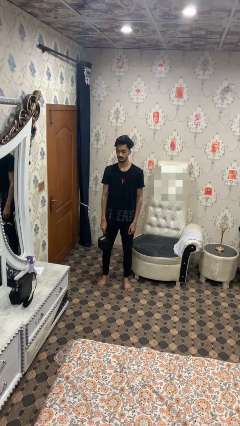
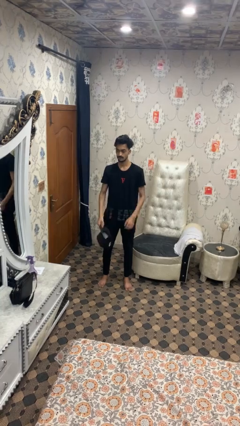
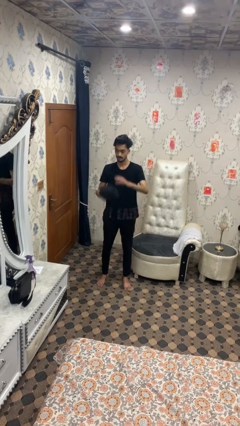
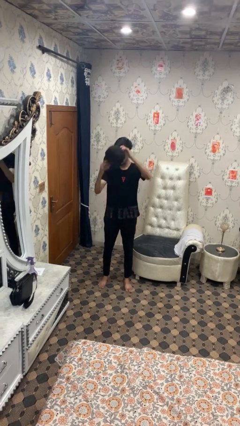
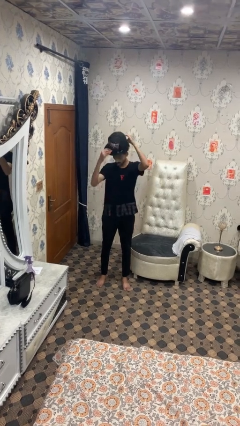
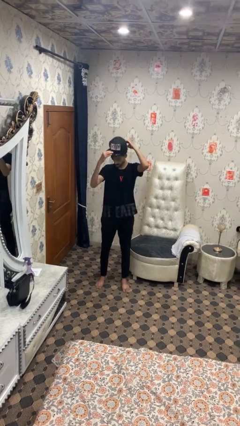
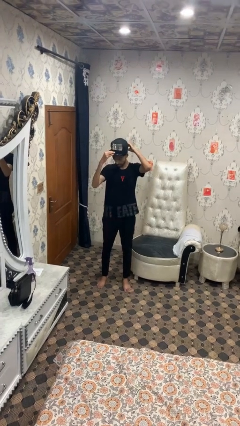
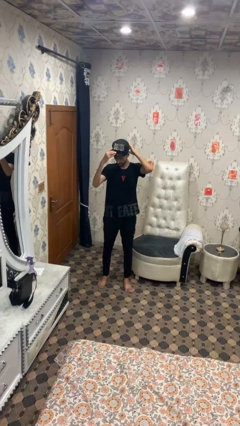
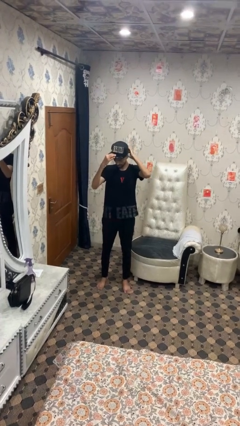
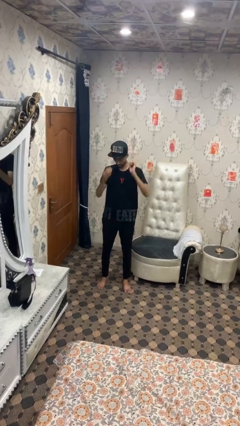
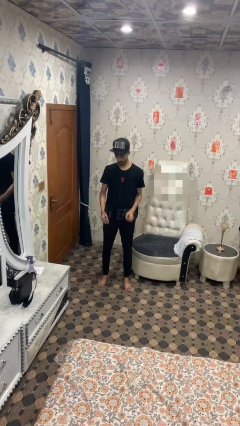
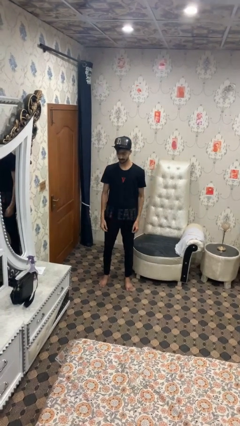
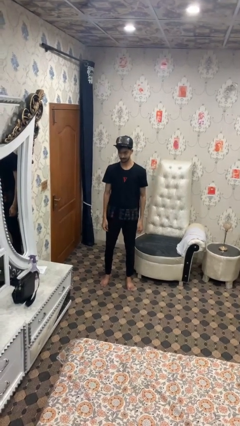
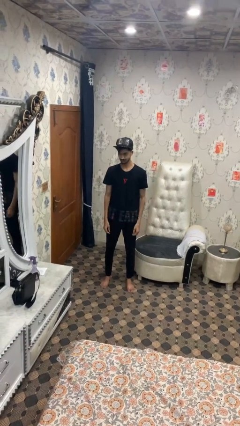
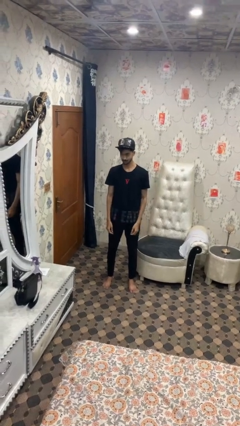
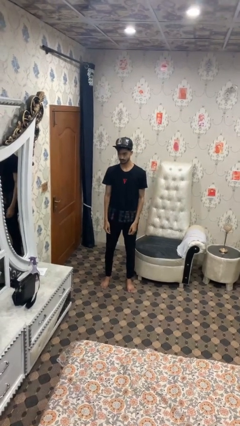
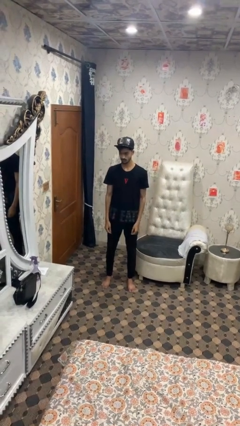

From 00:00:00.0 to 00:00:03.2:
person puts on hat

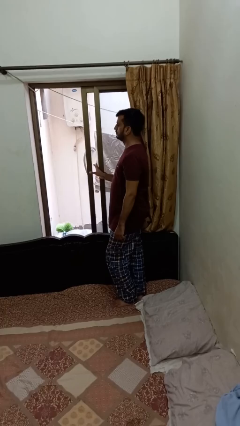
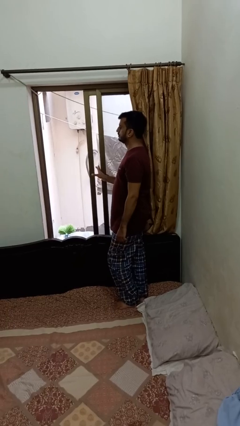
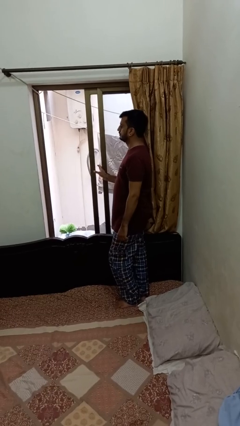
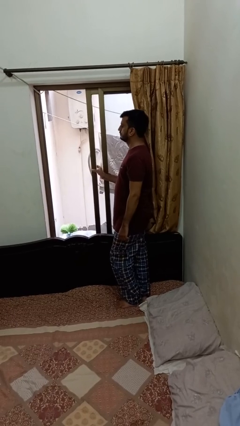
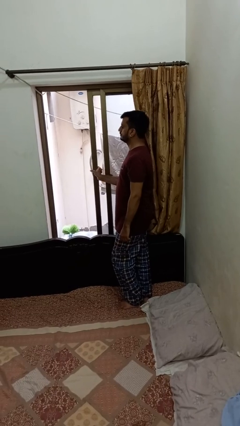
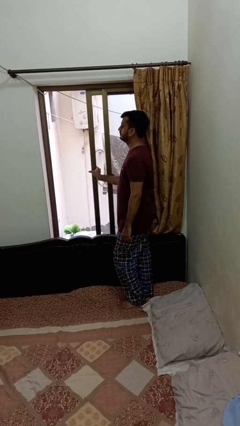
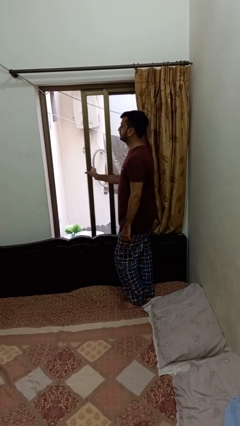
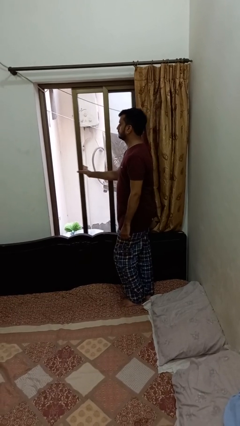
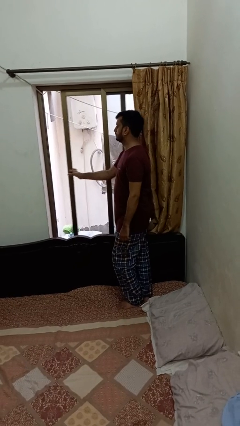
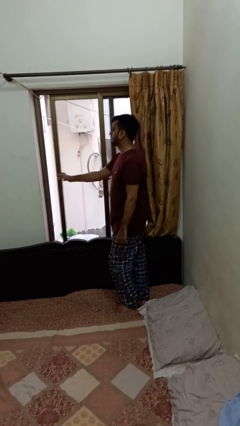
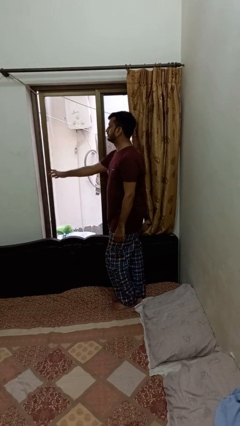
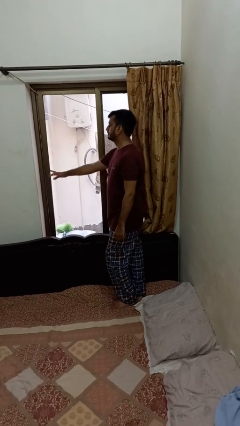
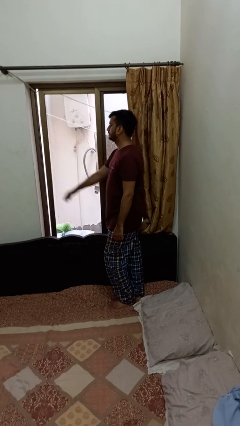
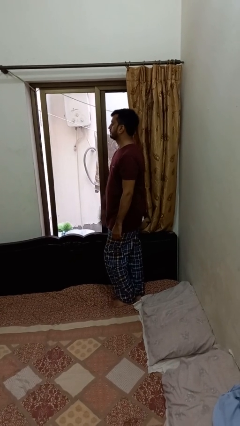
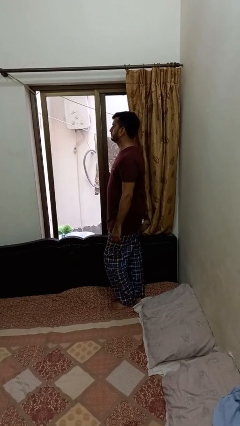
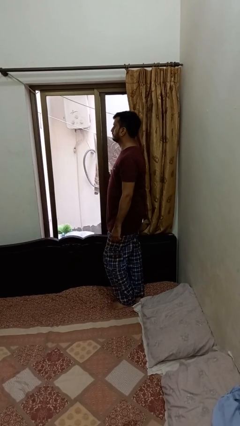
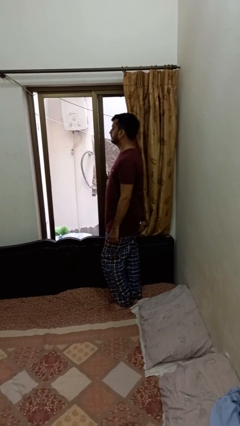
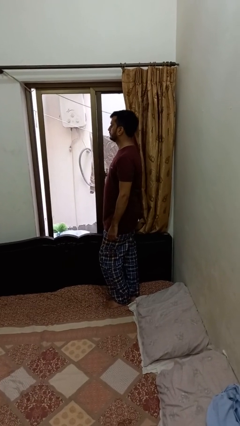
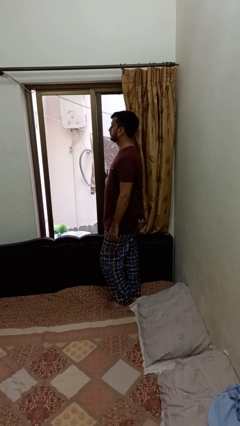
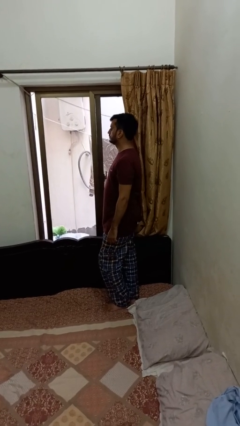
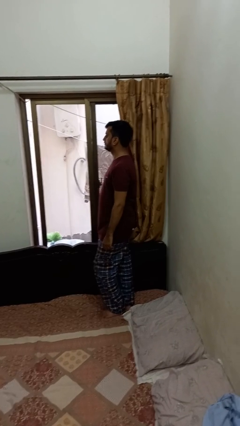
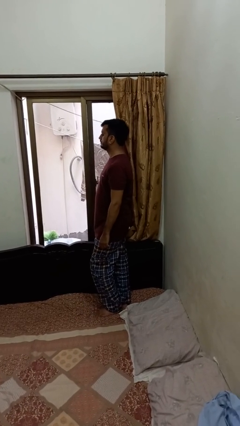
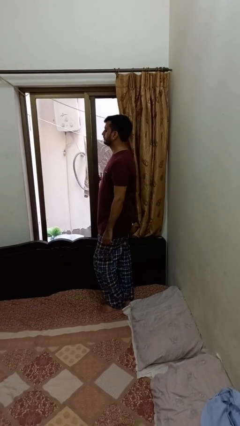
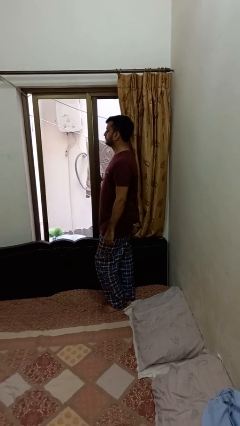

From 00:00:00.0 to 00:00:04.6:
person closes home window

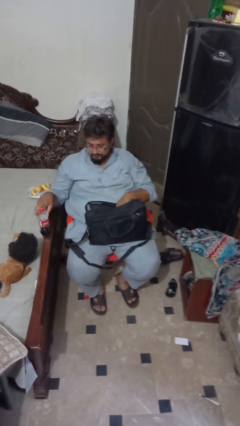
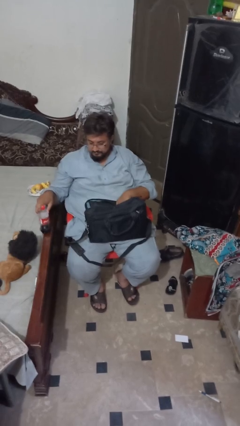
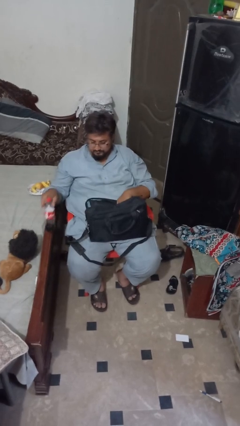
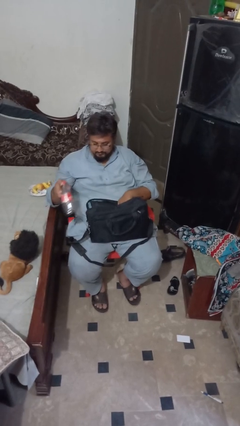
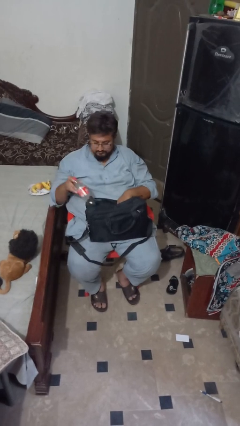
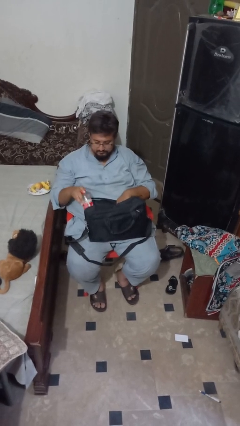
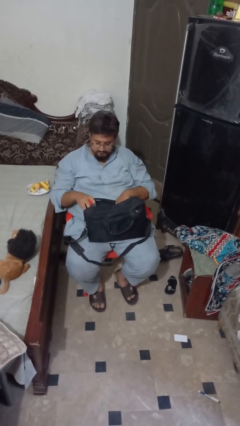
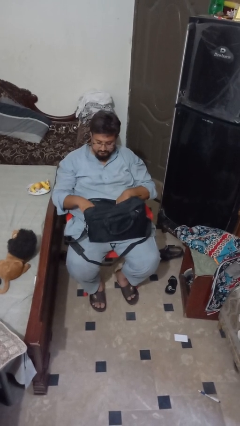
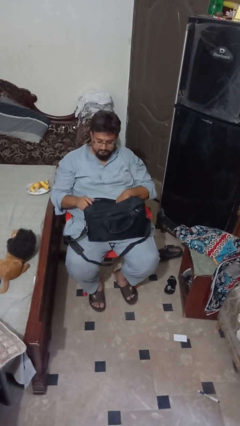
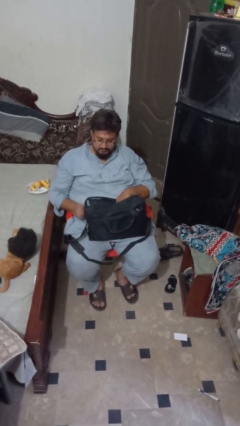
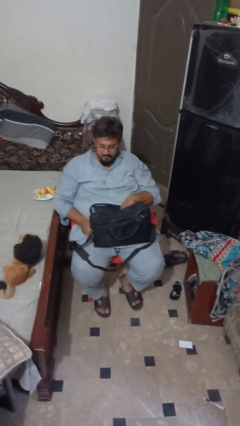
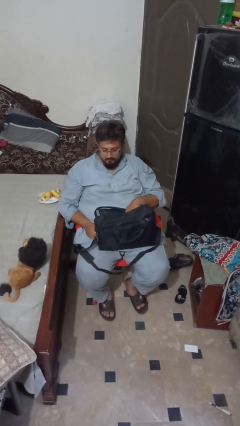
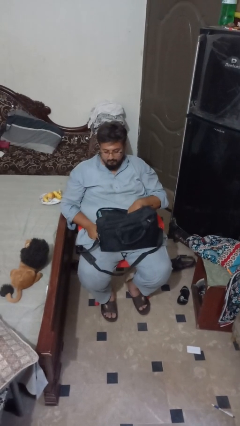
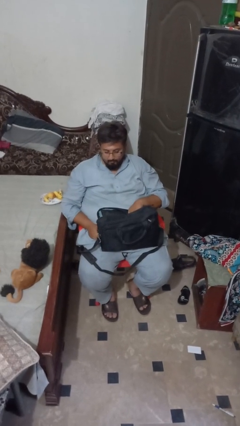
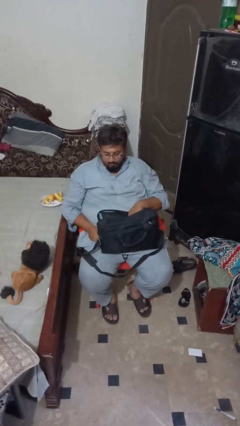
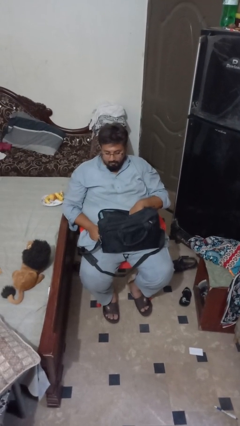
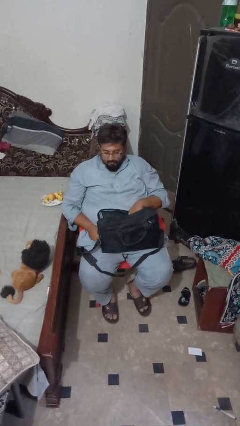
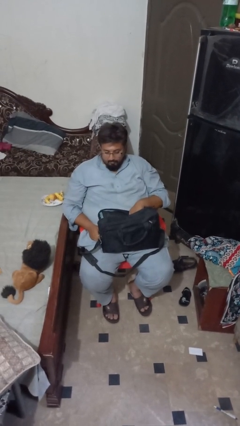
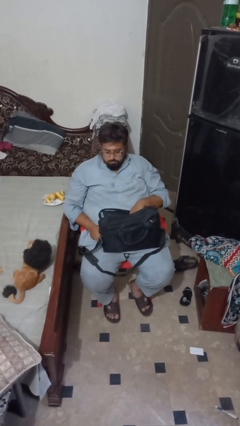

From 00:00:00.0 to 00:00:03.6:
person puts object into bag

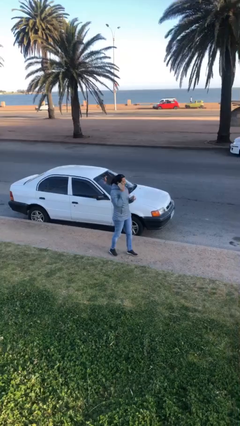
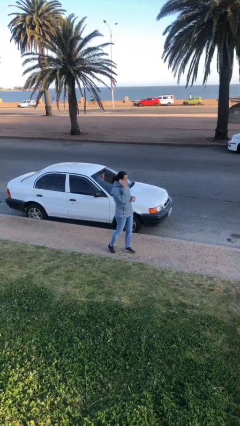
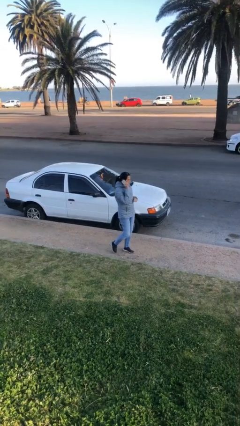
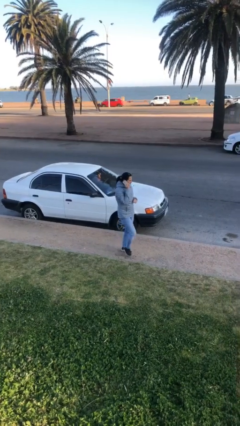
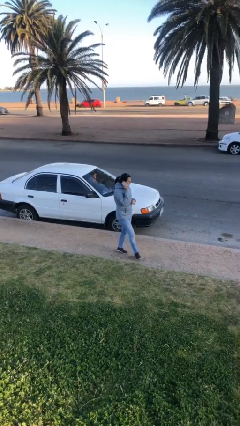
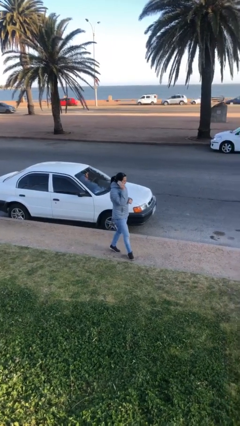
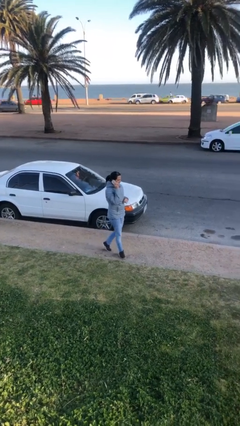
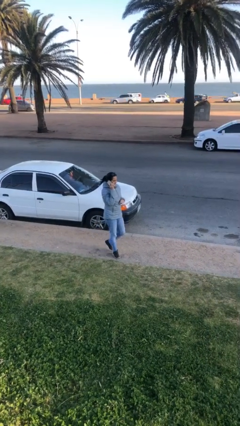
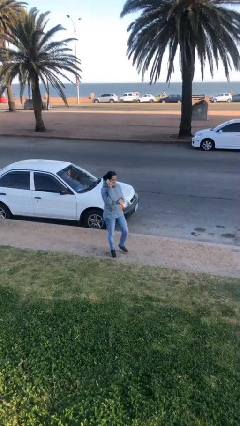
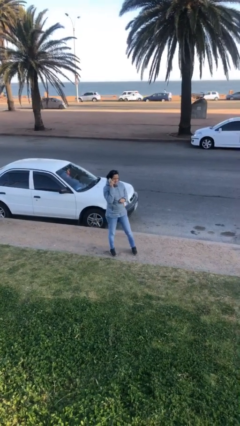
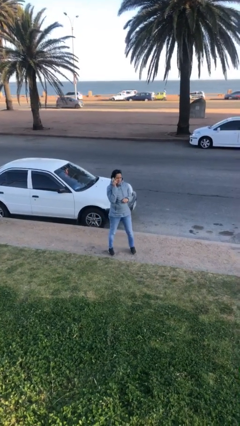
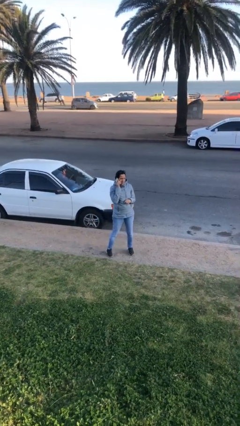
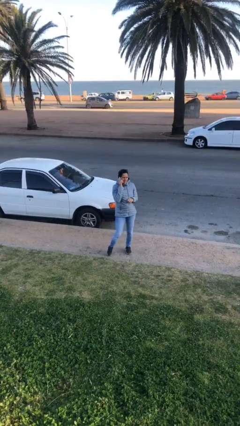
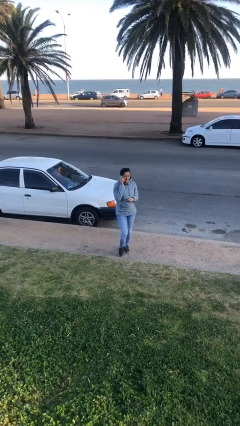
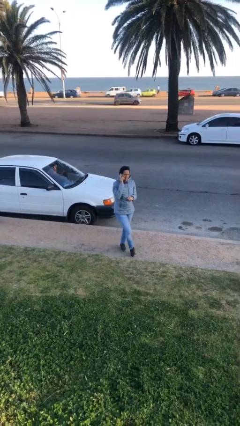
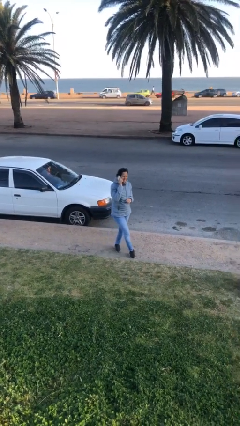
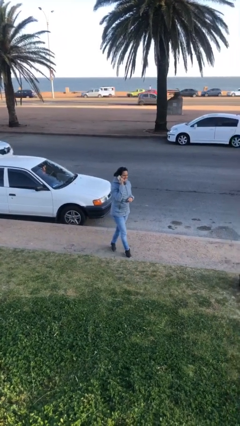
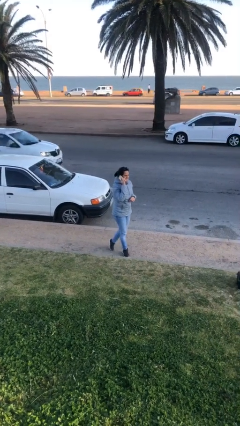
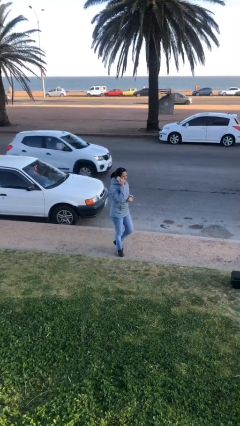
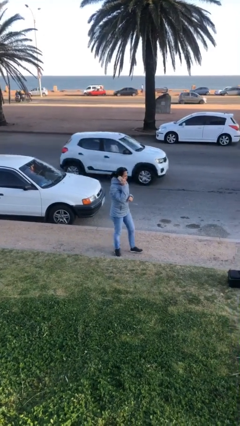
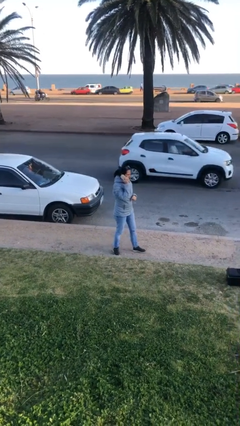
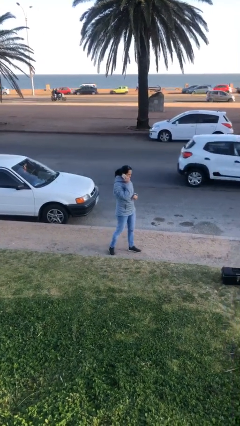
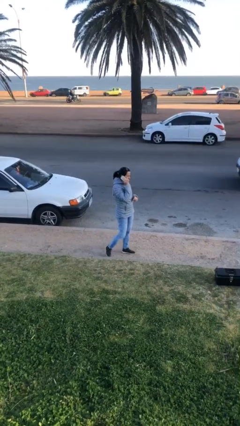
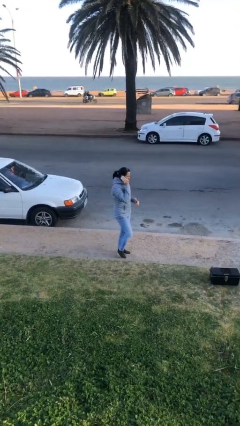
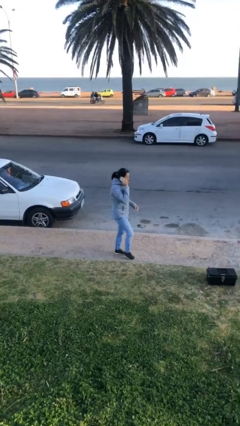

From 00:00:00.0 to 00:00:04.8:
person talks on phone

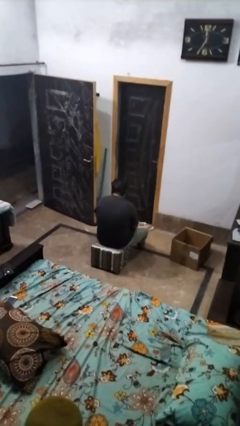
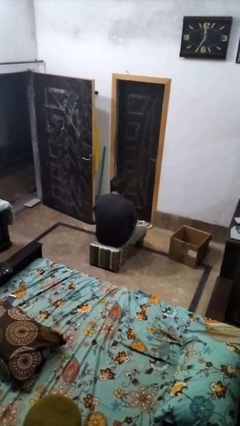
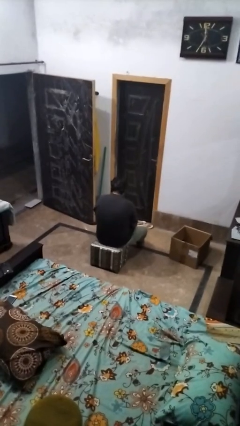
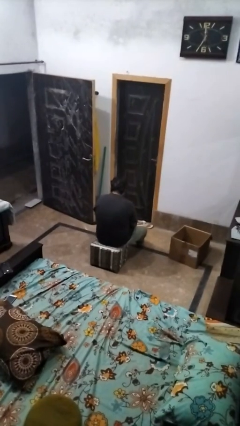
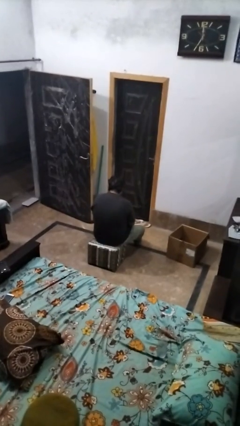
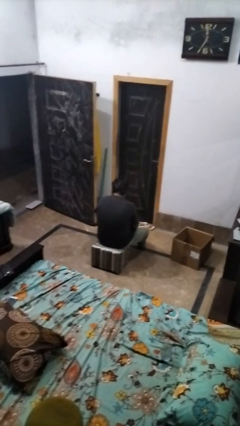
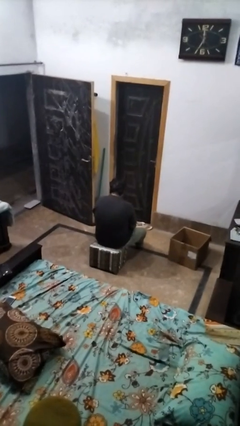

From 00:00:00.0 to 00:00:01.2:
person strokes hair

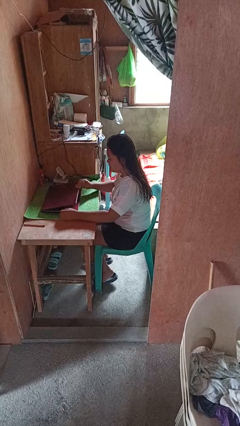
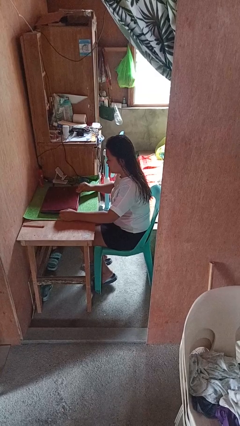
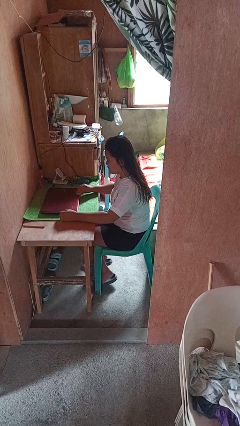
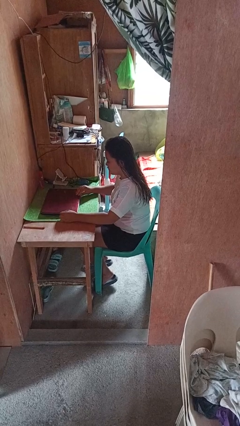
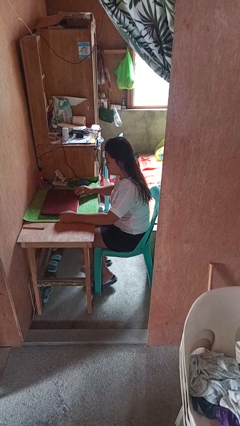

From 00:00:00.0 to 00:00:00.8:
person closes laptop
